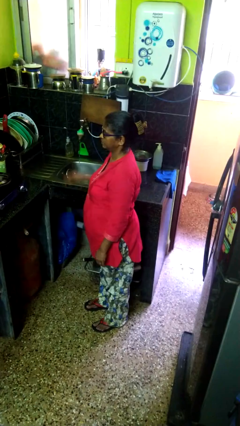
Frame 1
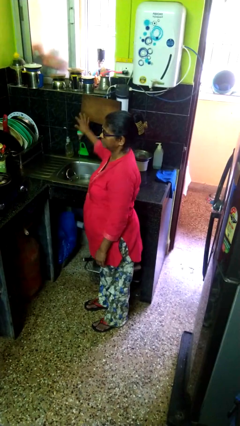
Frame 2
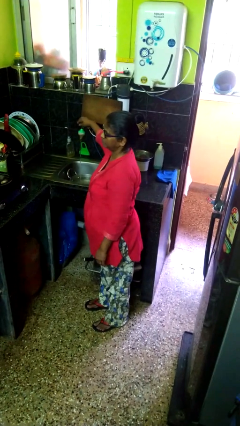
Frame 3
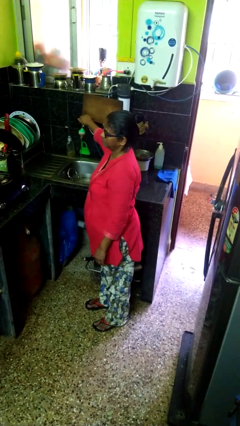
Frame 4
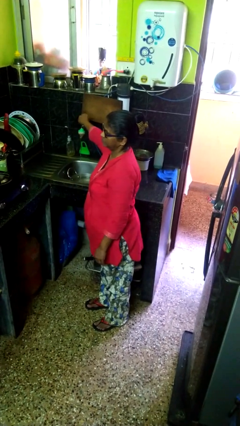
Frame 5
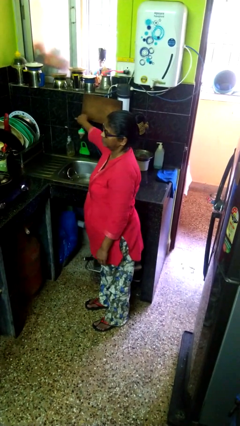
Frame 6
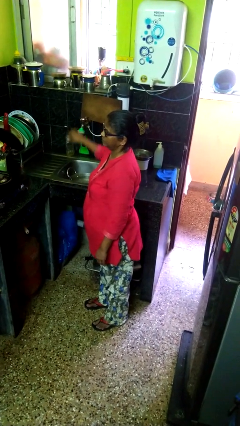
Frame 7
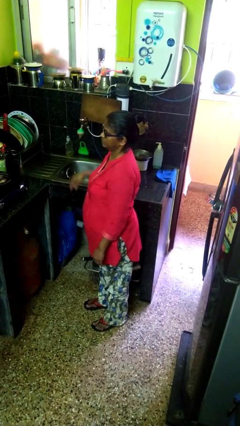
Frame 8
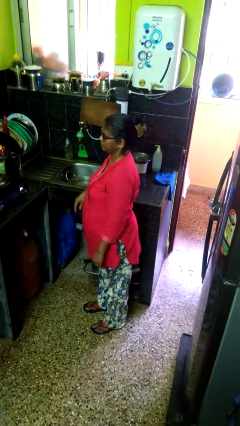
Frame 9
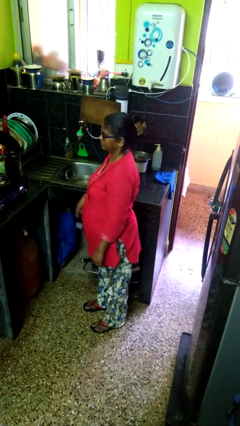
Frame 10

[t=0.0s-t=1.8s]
person turns off faucet

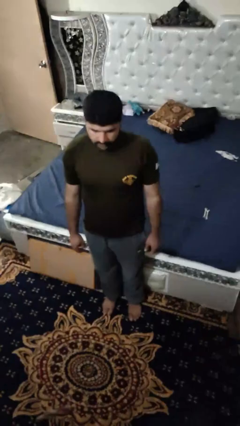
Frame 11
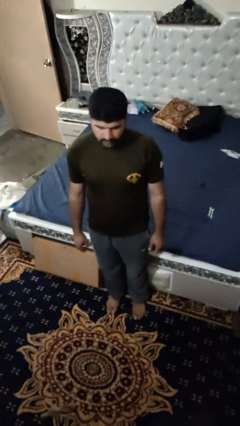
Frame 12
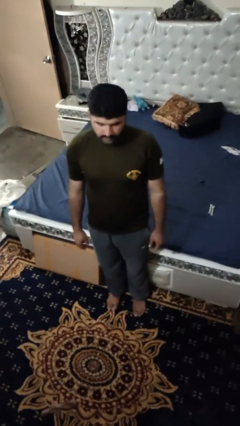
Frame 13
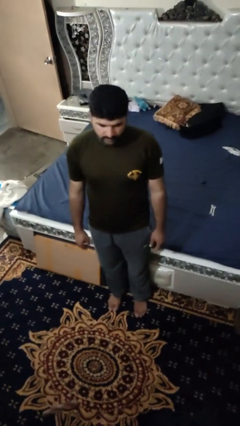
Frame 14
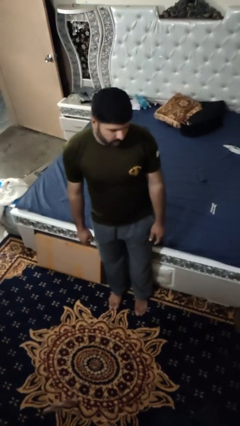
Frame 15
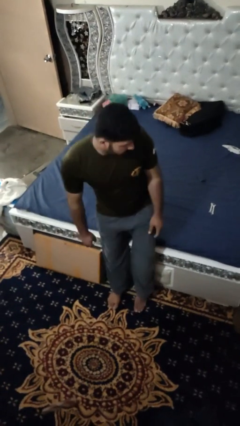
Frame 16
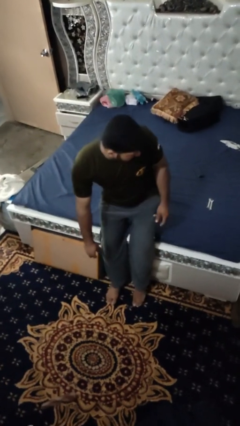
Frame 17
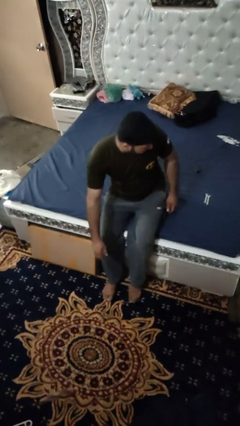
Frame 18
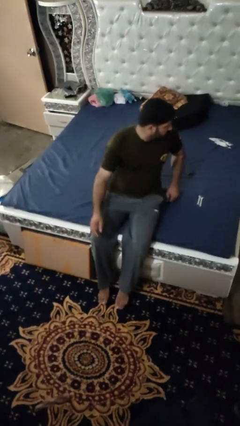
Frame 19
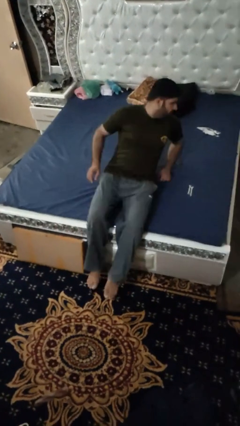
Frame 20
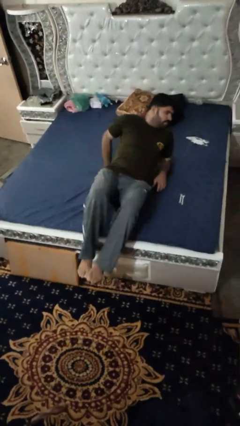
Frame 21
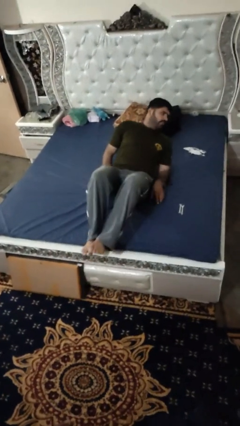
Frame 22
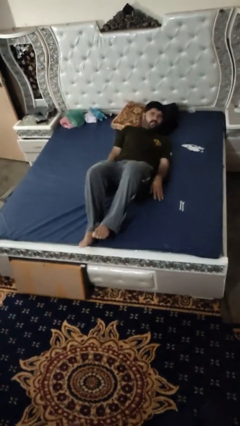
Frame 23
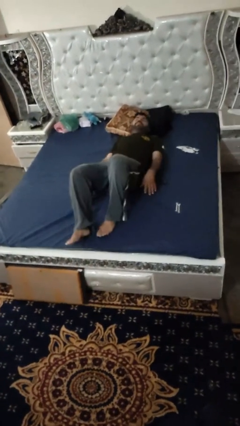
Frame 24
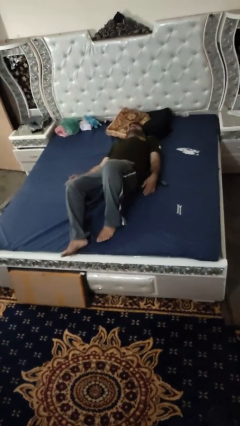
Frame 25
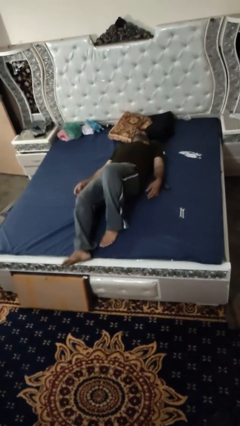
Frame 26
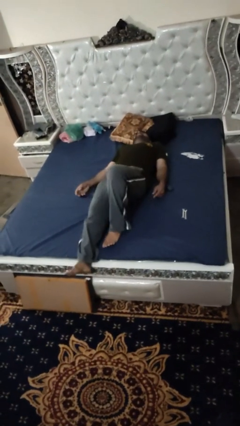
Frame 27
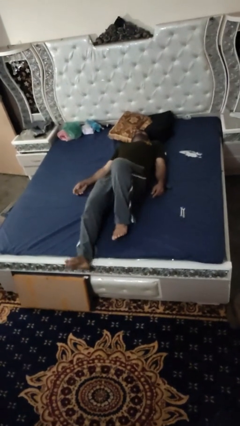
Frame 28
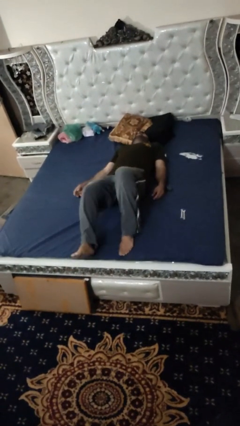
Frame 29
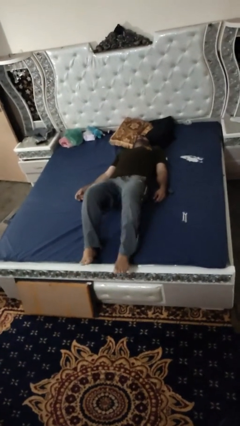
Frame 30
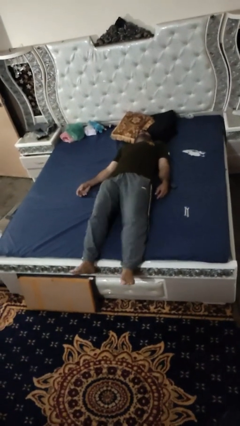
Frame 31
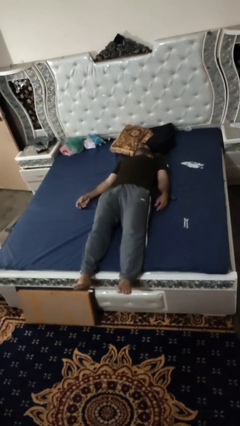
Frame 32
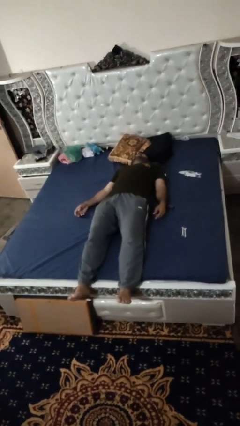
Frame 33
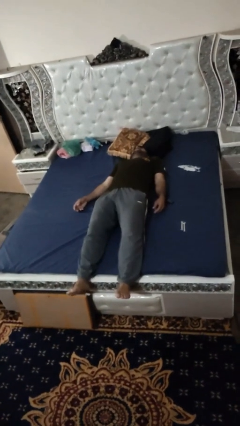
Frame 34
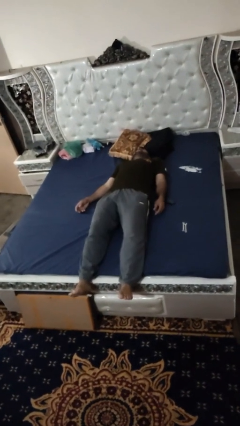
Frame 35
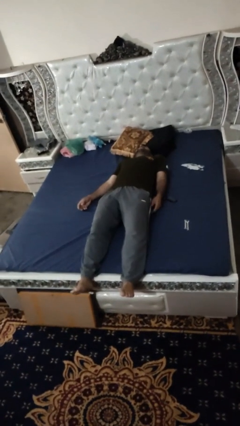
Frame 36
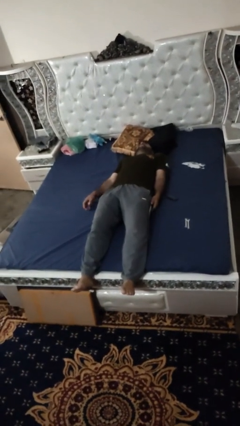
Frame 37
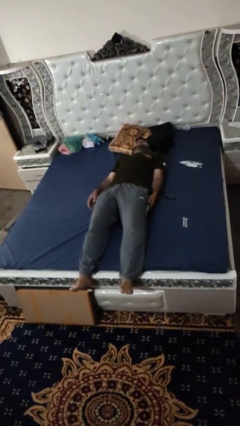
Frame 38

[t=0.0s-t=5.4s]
person lies down on bed

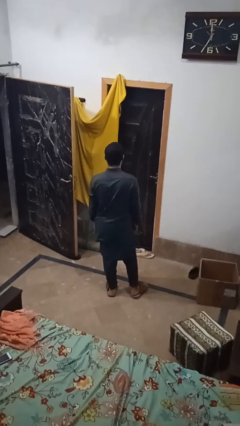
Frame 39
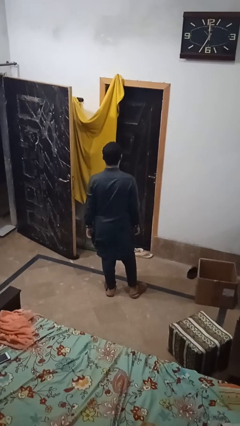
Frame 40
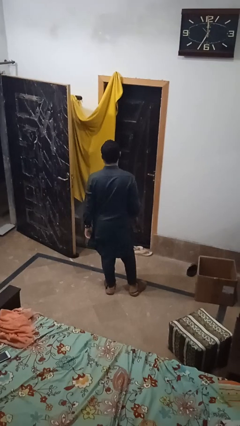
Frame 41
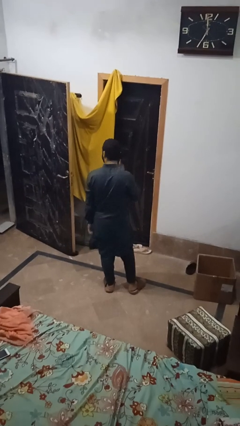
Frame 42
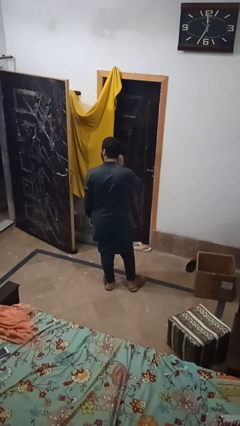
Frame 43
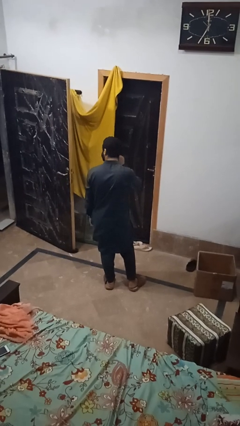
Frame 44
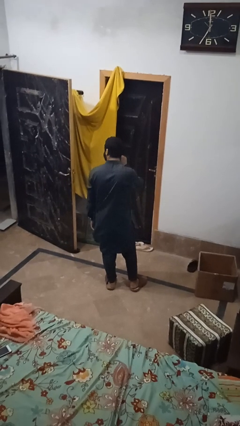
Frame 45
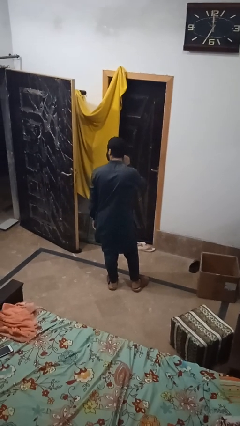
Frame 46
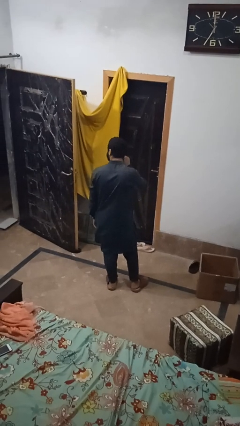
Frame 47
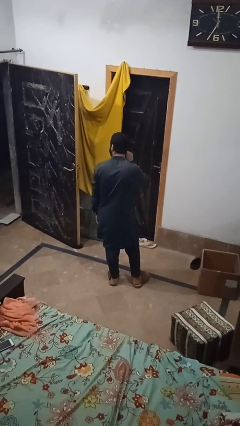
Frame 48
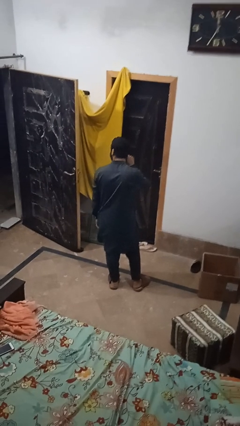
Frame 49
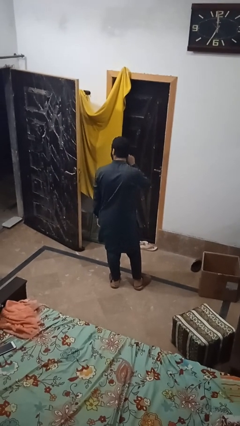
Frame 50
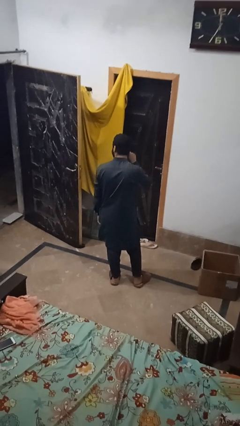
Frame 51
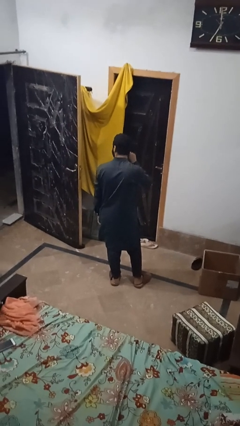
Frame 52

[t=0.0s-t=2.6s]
person gestures listen closely

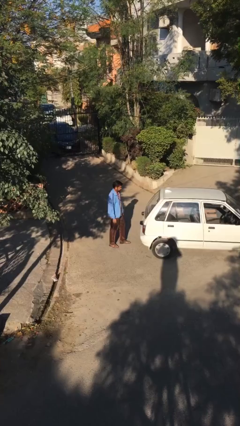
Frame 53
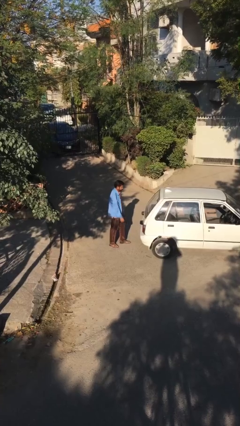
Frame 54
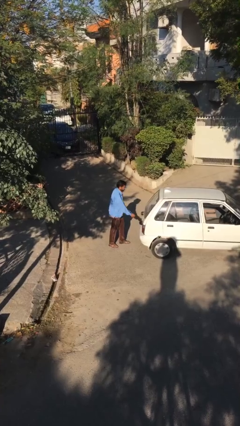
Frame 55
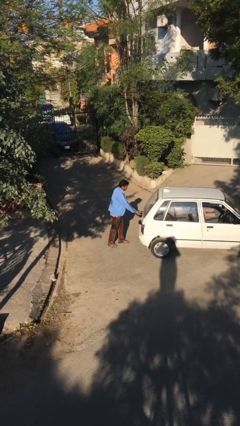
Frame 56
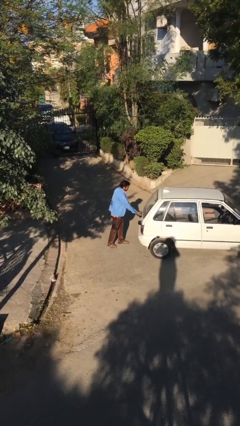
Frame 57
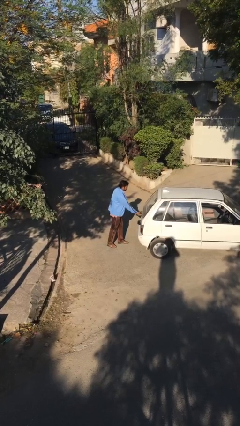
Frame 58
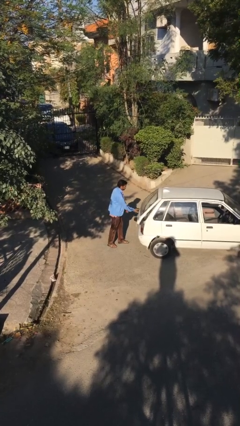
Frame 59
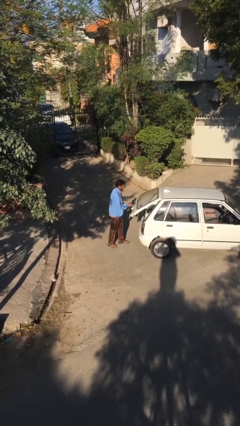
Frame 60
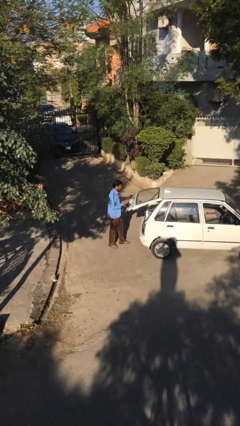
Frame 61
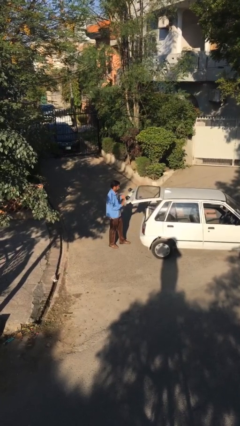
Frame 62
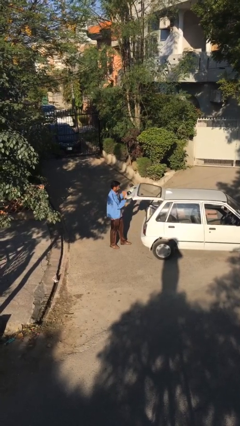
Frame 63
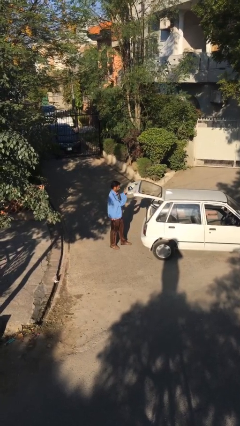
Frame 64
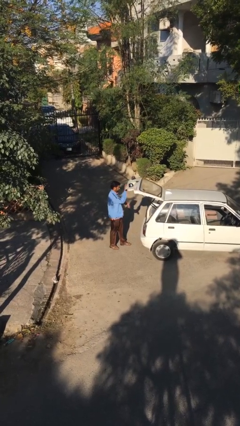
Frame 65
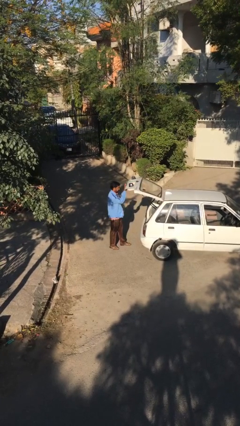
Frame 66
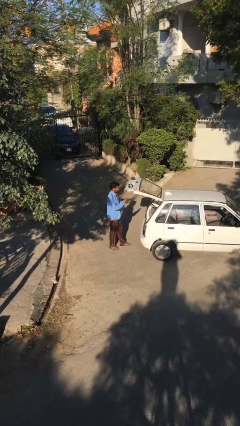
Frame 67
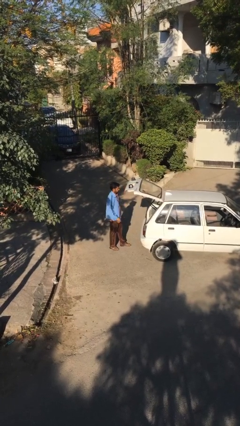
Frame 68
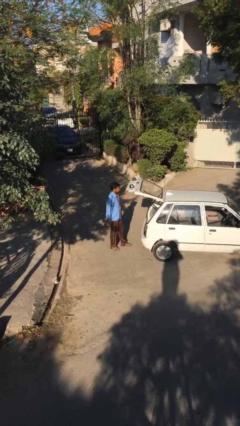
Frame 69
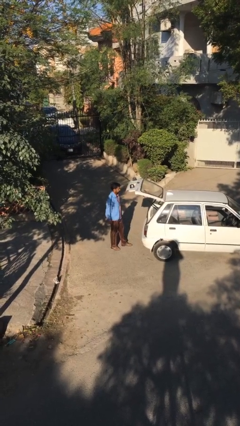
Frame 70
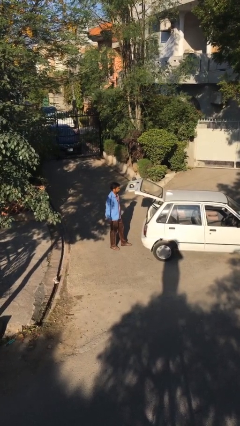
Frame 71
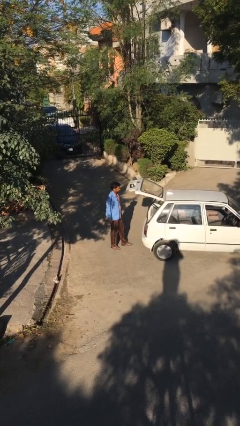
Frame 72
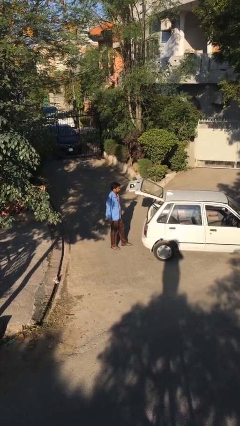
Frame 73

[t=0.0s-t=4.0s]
person opens car trunk

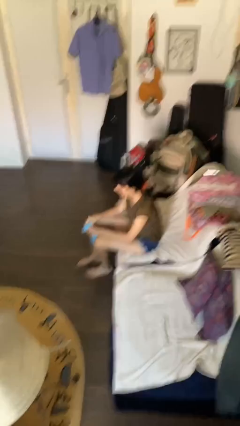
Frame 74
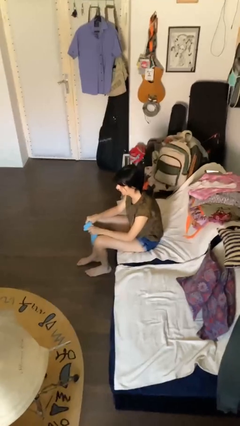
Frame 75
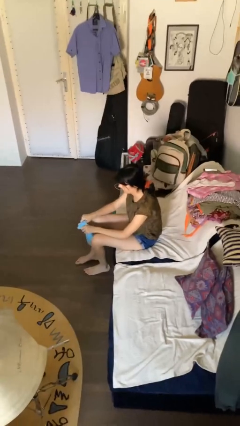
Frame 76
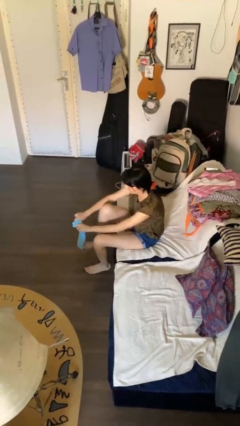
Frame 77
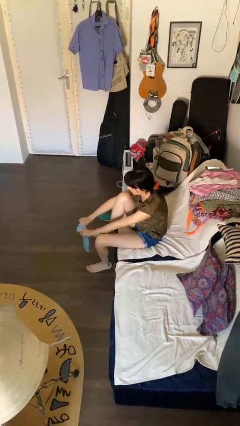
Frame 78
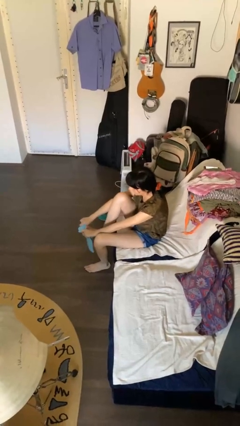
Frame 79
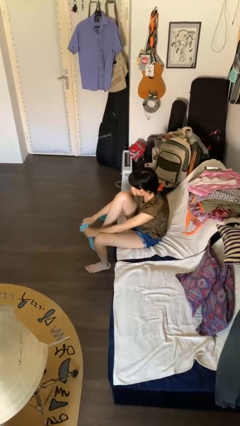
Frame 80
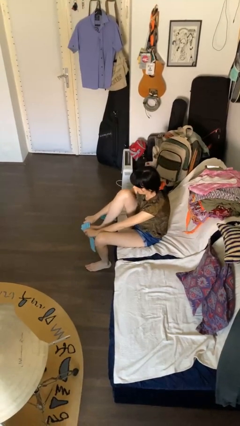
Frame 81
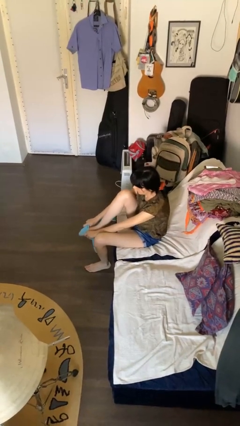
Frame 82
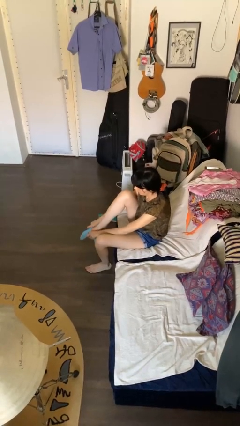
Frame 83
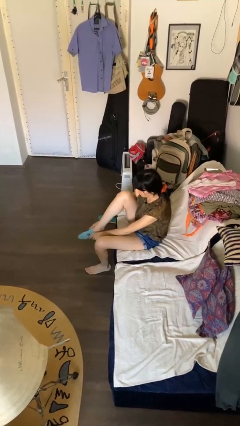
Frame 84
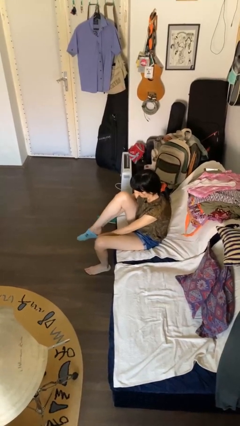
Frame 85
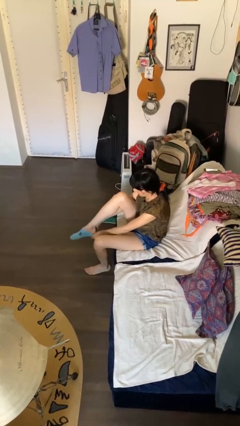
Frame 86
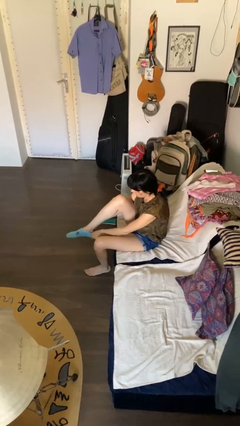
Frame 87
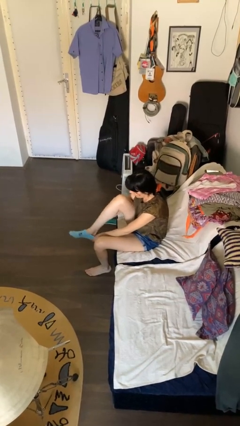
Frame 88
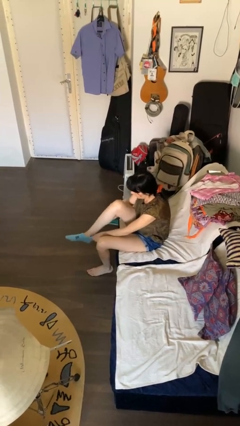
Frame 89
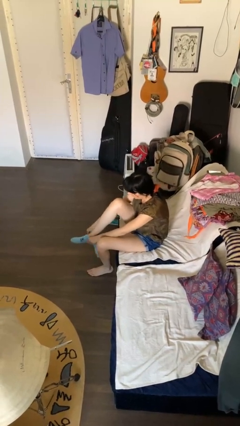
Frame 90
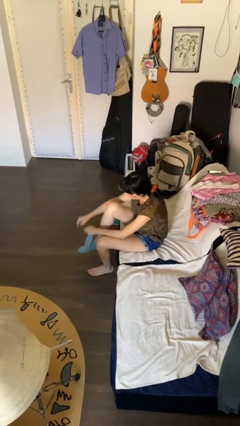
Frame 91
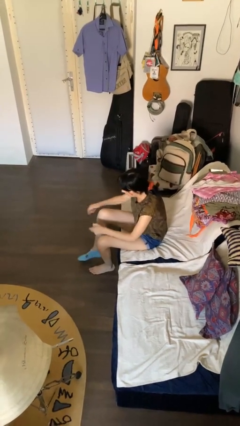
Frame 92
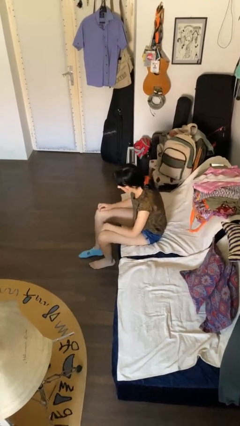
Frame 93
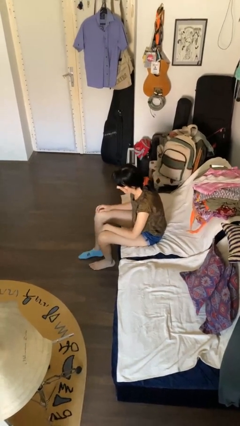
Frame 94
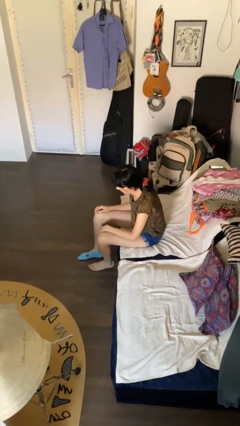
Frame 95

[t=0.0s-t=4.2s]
person puts on socks
